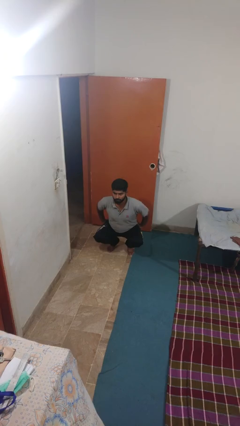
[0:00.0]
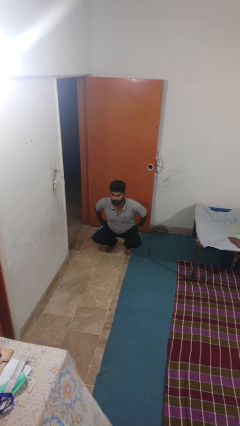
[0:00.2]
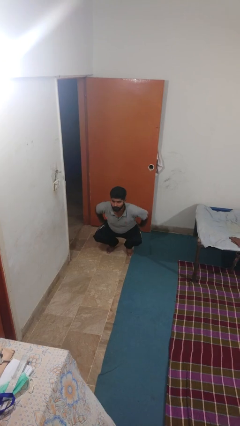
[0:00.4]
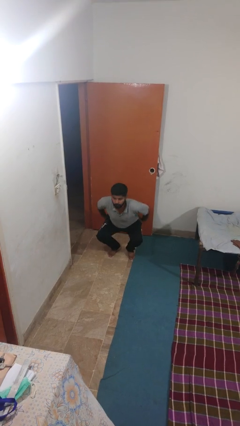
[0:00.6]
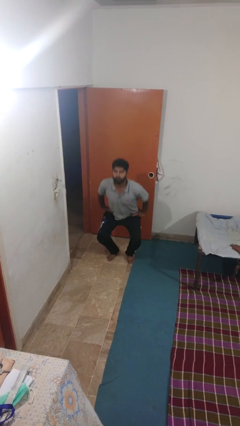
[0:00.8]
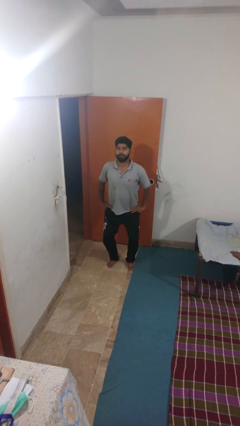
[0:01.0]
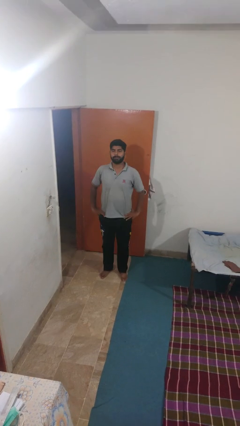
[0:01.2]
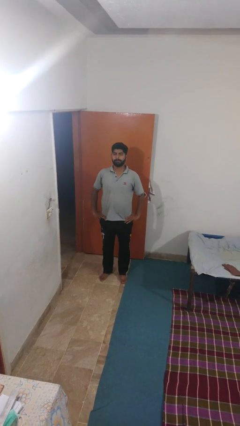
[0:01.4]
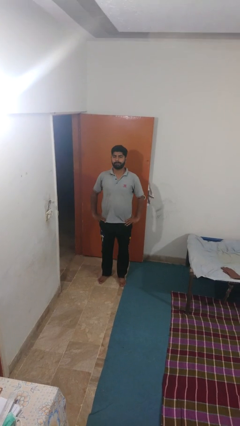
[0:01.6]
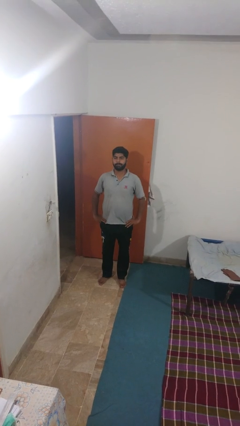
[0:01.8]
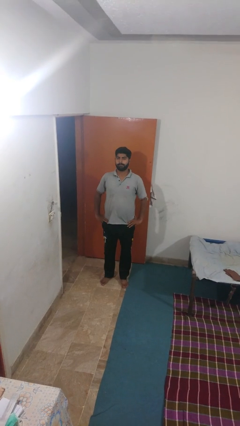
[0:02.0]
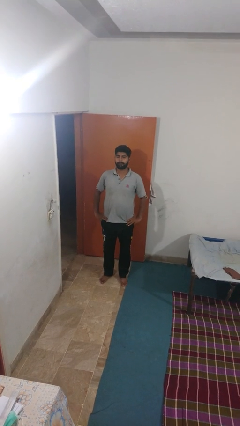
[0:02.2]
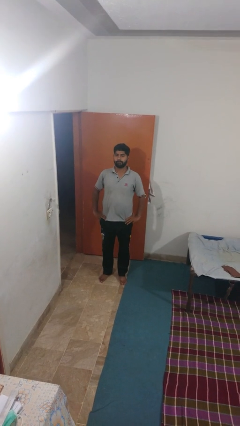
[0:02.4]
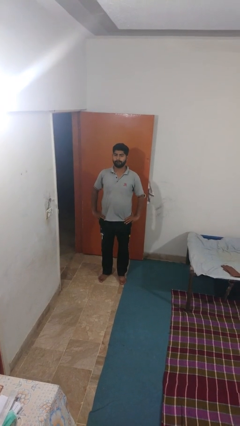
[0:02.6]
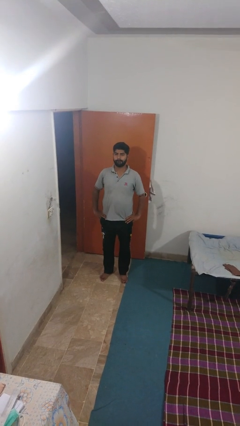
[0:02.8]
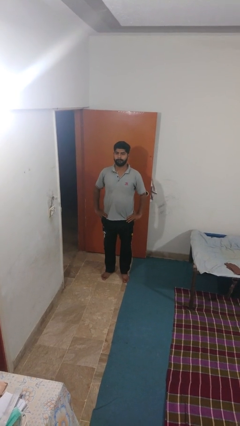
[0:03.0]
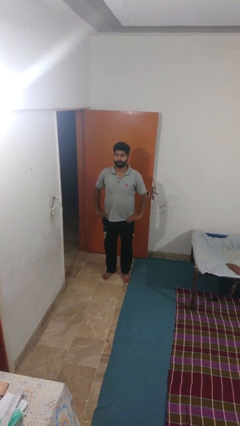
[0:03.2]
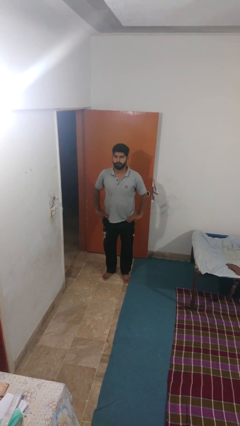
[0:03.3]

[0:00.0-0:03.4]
person stands up

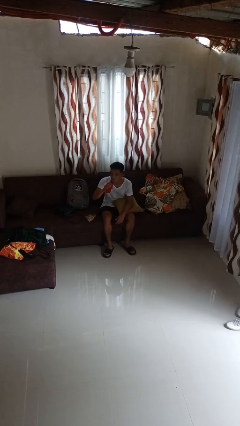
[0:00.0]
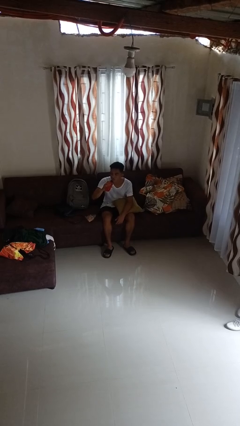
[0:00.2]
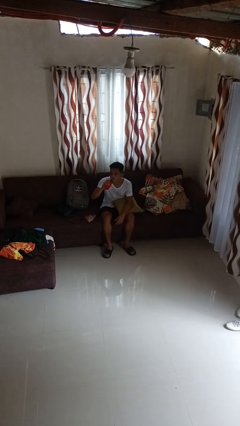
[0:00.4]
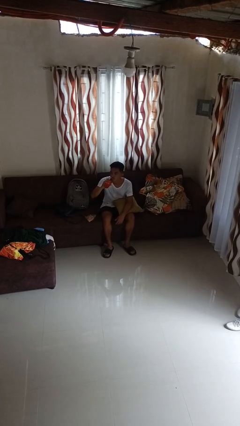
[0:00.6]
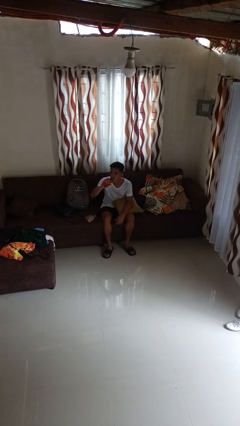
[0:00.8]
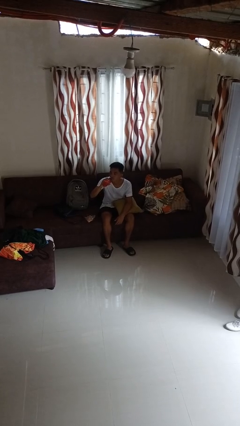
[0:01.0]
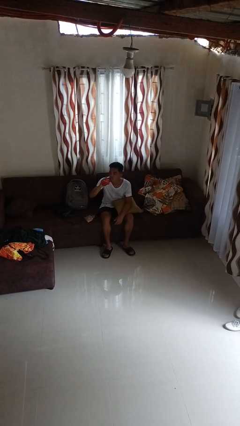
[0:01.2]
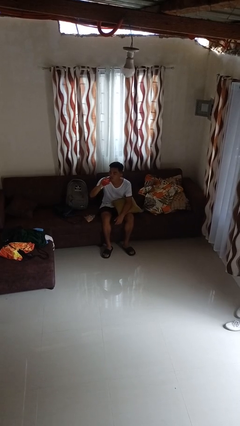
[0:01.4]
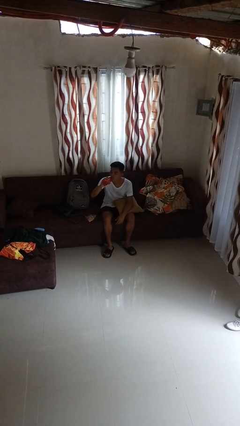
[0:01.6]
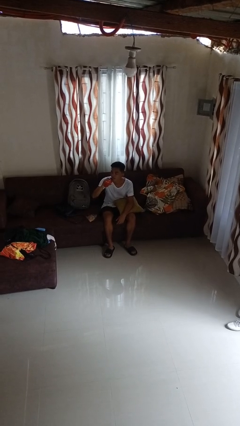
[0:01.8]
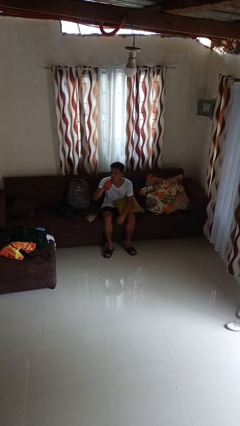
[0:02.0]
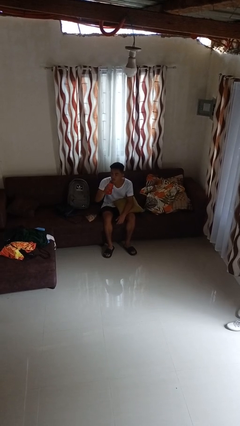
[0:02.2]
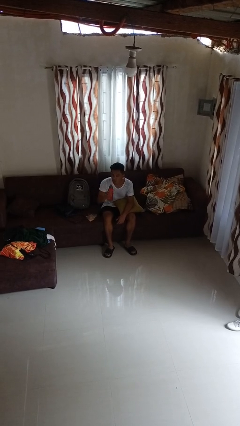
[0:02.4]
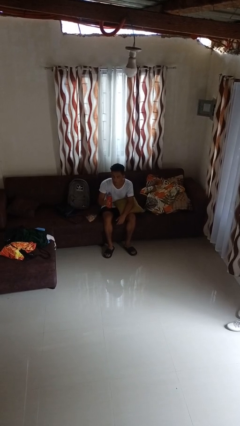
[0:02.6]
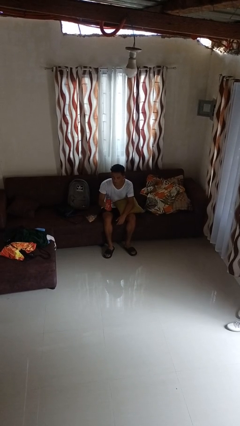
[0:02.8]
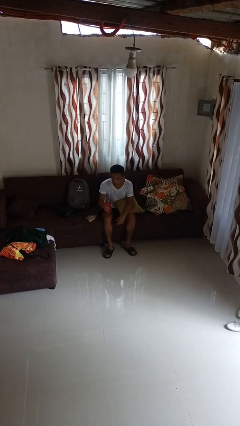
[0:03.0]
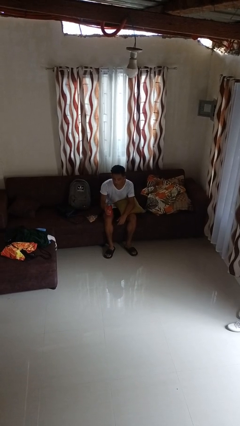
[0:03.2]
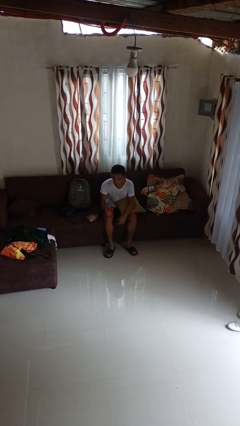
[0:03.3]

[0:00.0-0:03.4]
person drinks from bottle

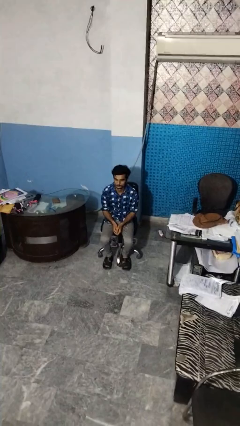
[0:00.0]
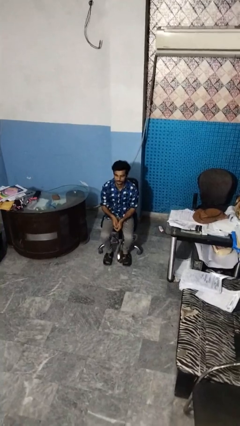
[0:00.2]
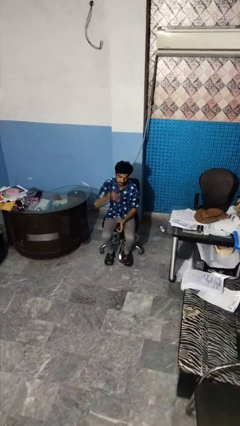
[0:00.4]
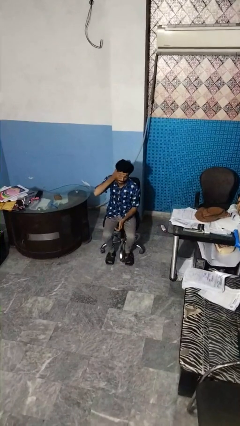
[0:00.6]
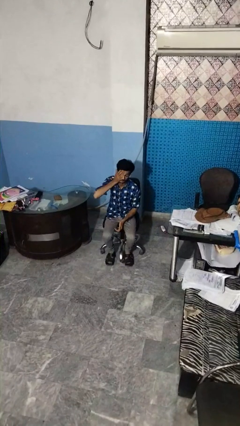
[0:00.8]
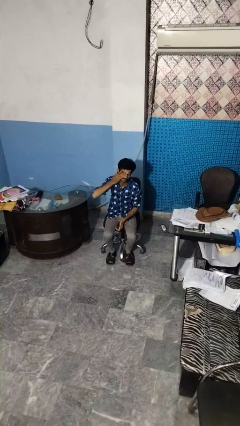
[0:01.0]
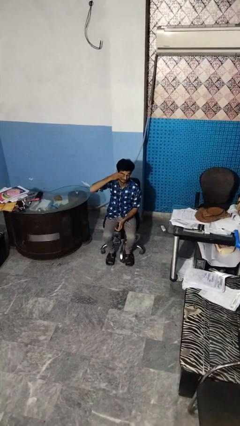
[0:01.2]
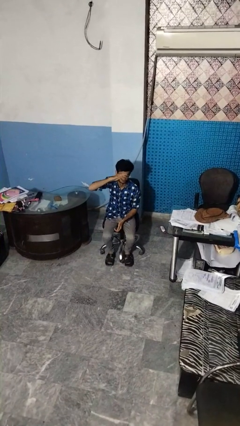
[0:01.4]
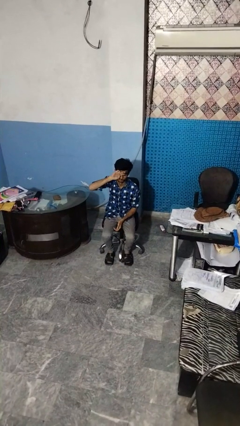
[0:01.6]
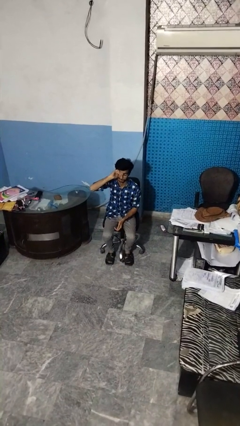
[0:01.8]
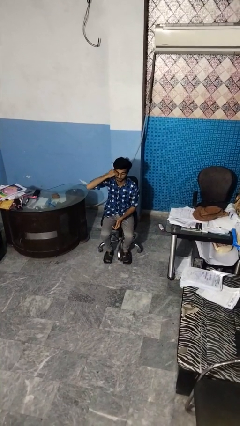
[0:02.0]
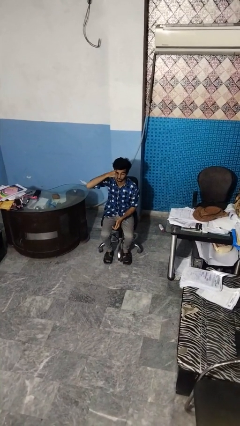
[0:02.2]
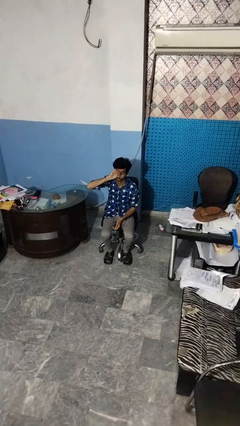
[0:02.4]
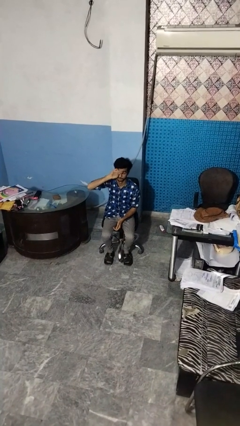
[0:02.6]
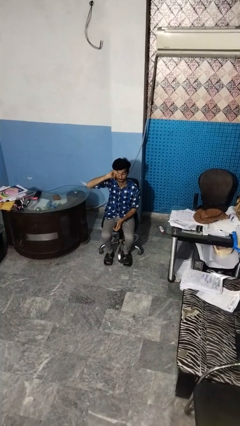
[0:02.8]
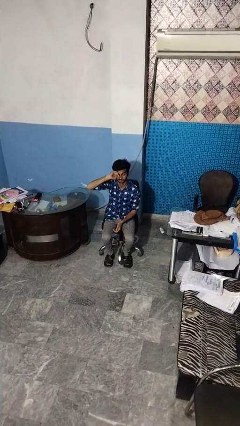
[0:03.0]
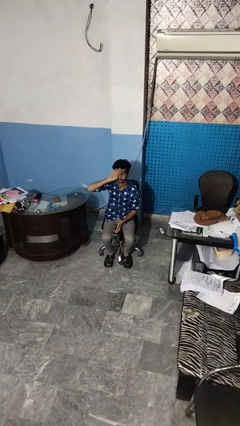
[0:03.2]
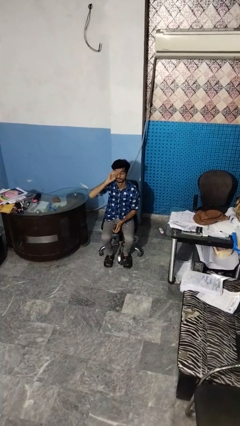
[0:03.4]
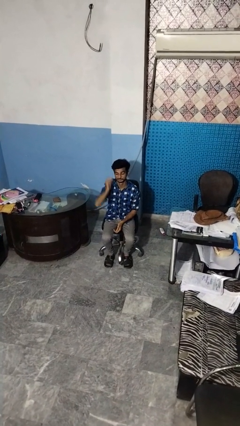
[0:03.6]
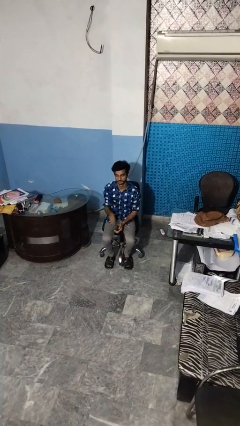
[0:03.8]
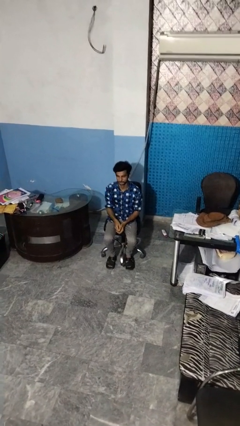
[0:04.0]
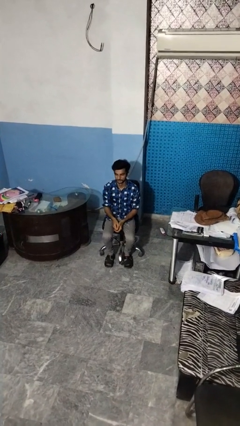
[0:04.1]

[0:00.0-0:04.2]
person rubs eyes

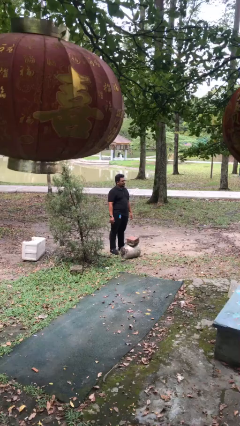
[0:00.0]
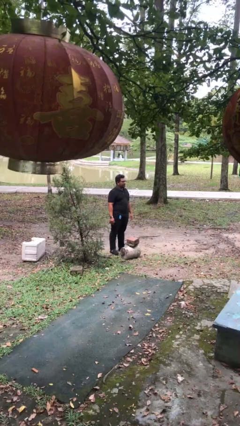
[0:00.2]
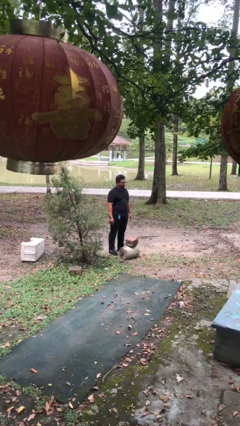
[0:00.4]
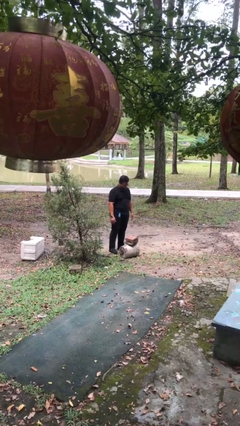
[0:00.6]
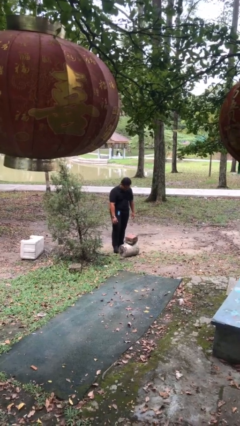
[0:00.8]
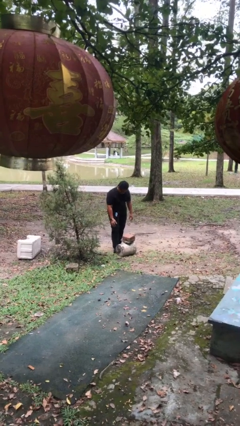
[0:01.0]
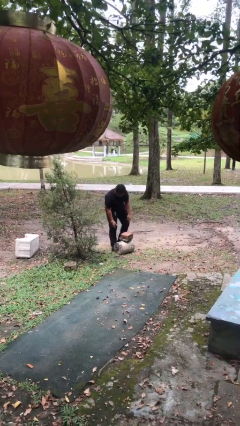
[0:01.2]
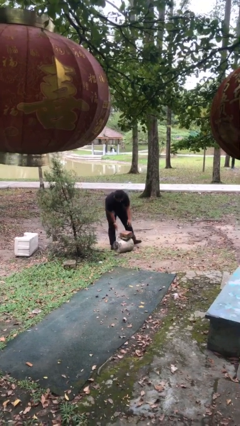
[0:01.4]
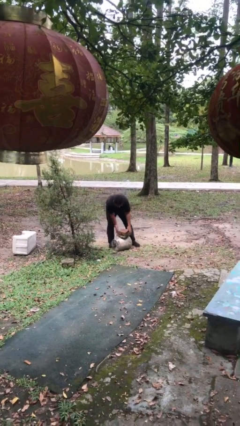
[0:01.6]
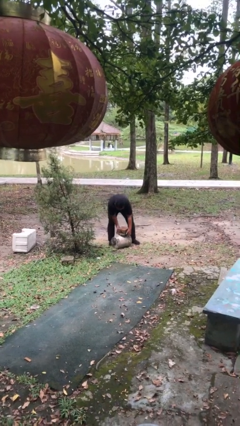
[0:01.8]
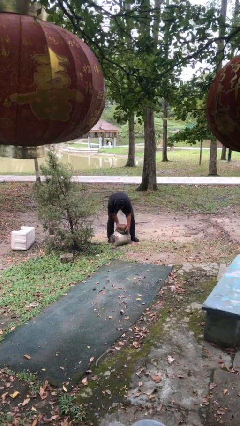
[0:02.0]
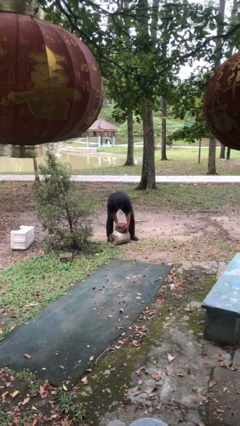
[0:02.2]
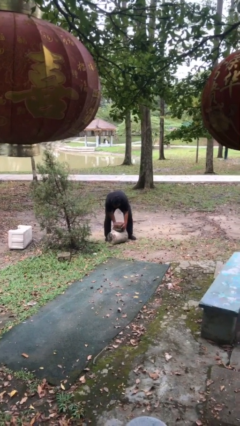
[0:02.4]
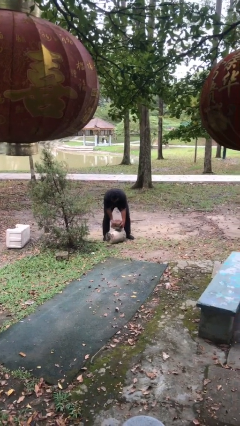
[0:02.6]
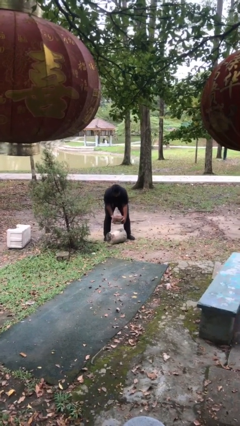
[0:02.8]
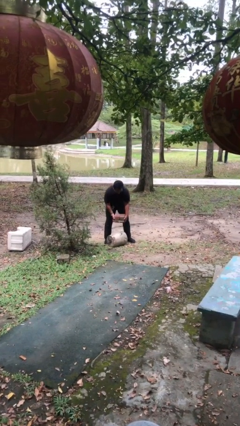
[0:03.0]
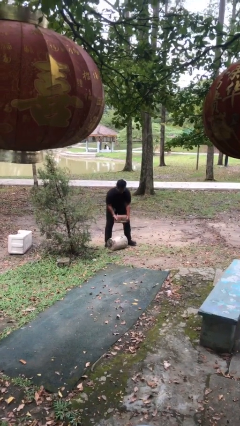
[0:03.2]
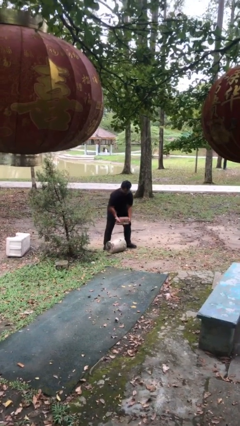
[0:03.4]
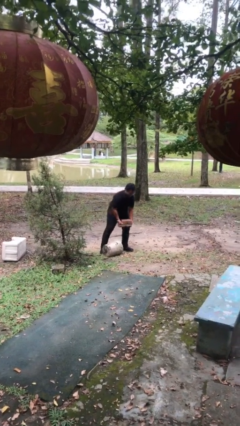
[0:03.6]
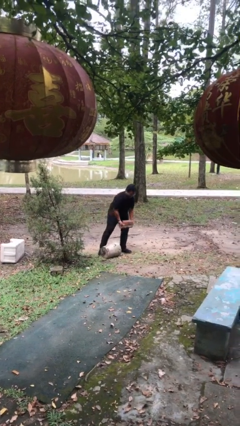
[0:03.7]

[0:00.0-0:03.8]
person picks up object from floor

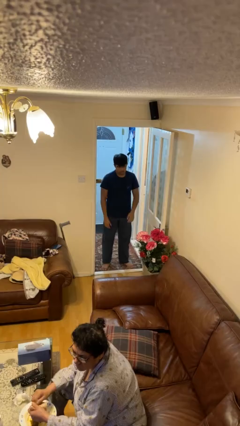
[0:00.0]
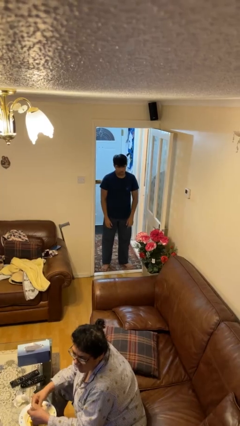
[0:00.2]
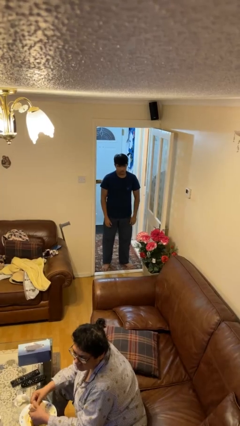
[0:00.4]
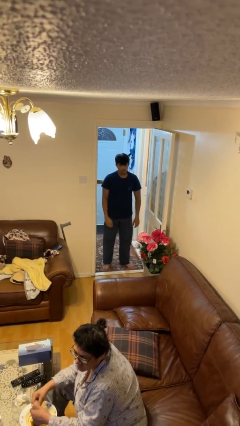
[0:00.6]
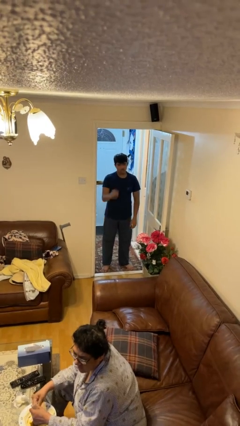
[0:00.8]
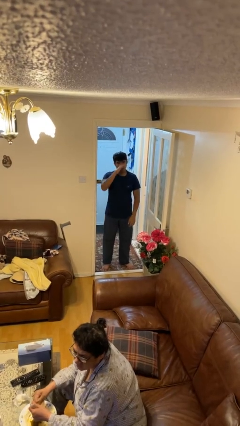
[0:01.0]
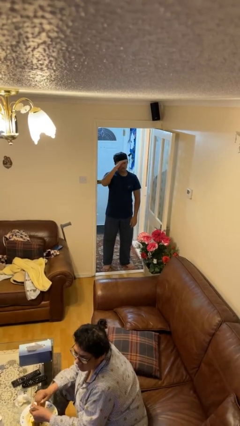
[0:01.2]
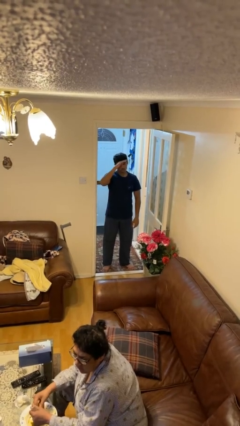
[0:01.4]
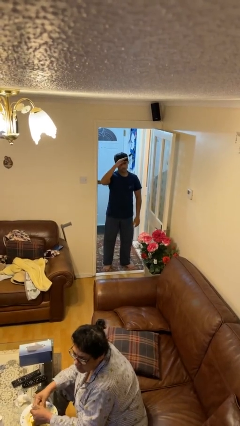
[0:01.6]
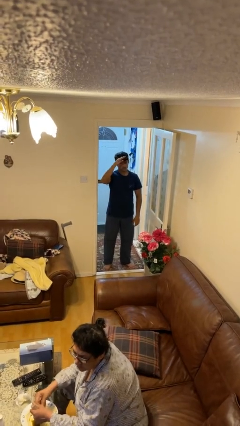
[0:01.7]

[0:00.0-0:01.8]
person salutes

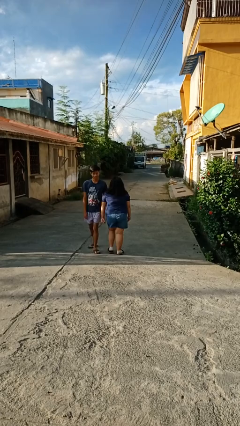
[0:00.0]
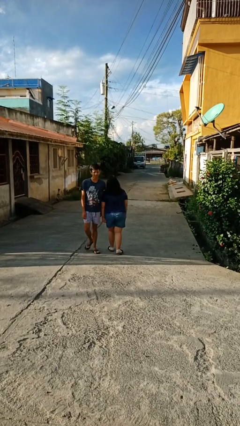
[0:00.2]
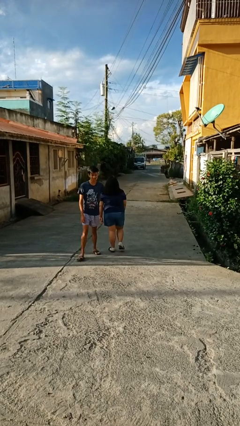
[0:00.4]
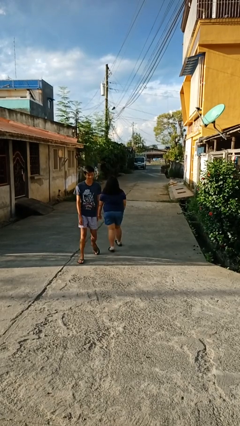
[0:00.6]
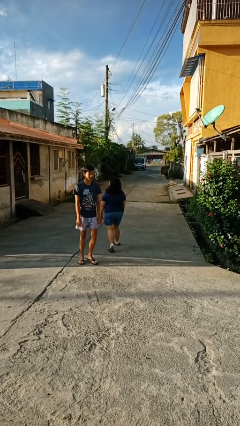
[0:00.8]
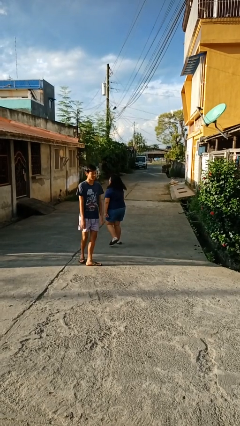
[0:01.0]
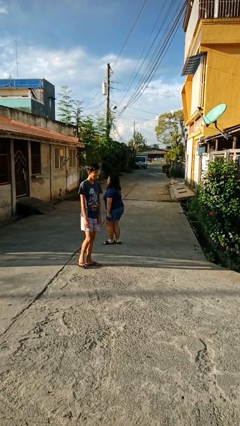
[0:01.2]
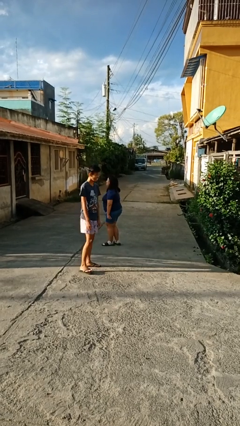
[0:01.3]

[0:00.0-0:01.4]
person bumps into person
